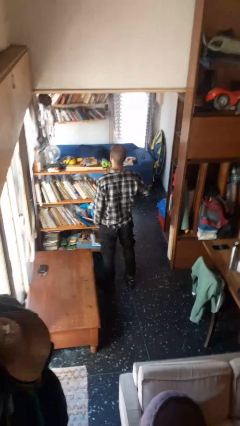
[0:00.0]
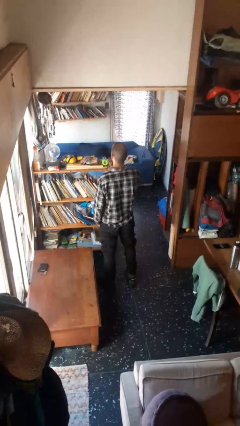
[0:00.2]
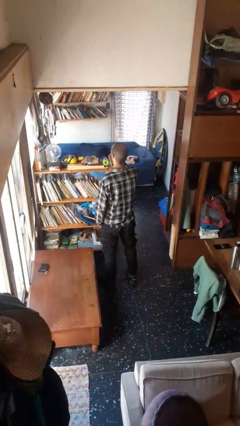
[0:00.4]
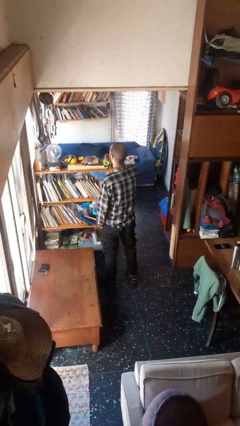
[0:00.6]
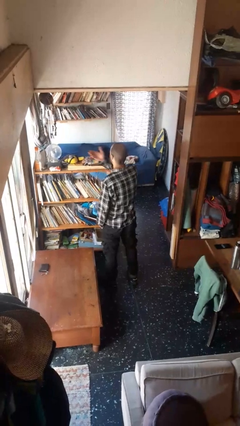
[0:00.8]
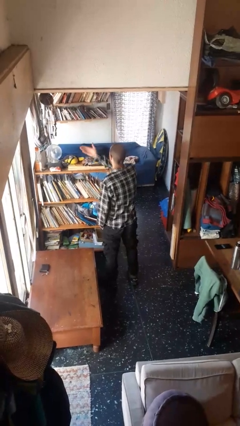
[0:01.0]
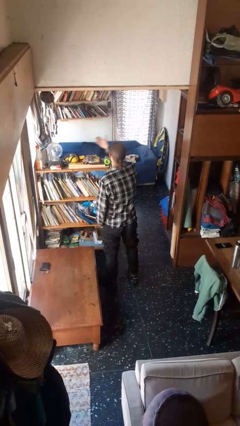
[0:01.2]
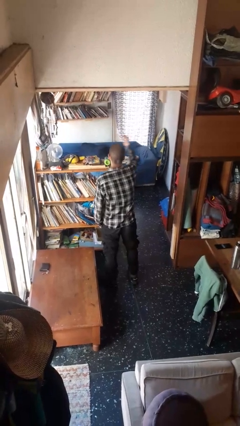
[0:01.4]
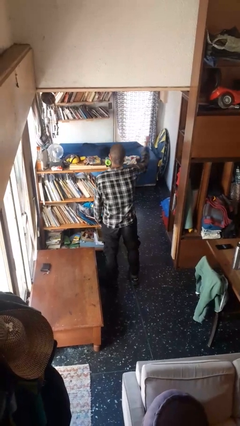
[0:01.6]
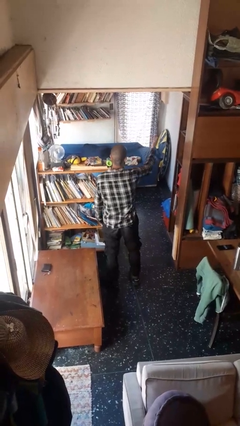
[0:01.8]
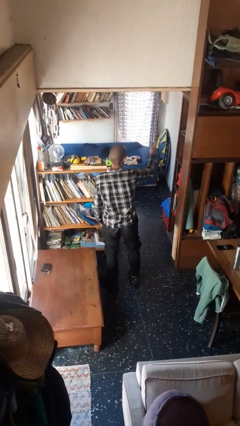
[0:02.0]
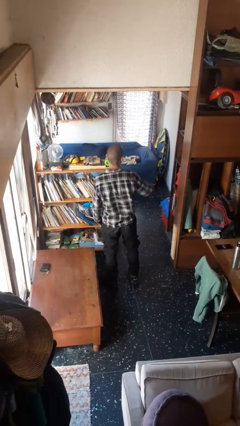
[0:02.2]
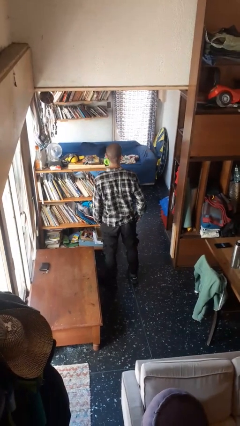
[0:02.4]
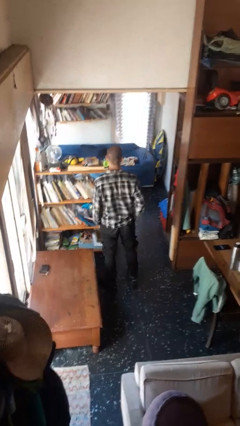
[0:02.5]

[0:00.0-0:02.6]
person gestures blow kiss

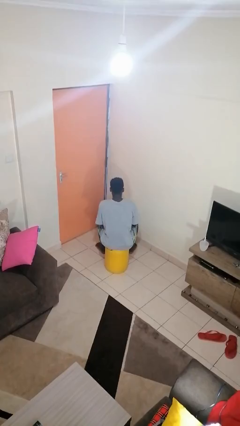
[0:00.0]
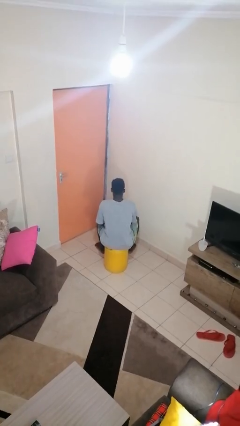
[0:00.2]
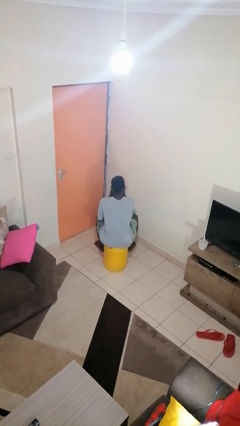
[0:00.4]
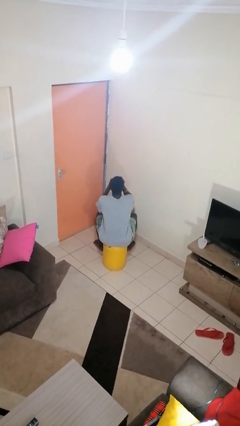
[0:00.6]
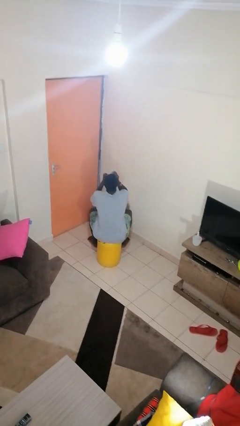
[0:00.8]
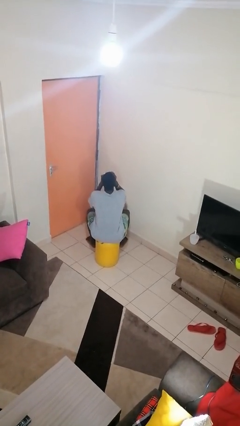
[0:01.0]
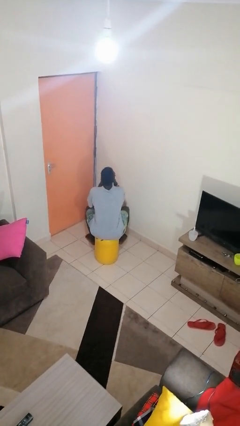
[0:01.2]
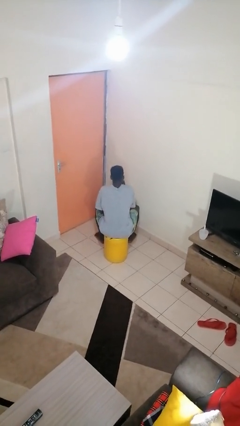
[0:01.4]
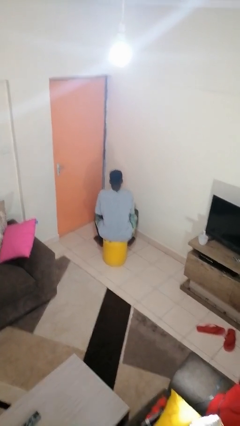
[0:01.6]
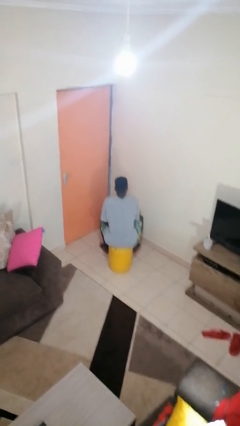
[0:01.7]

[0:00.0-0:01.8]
person drinks from mug

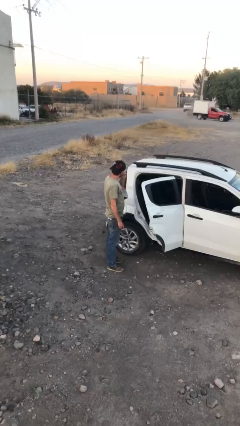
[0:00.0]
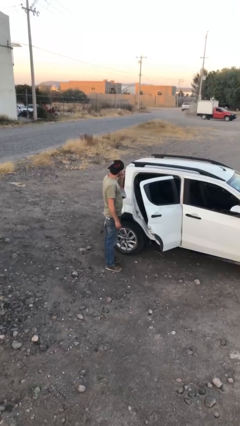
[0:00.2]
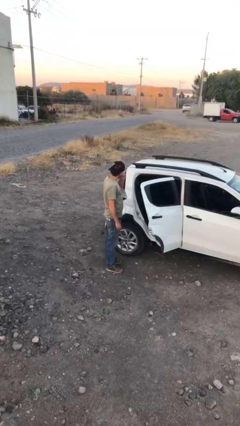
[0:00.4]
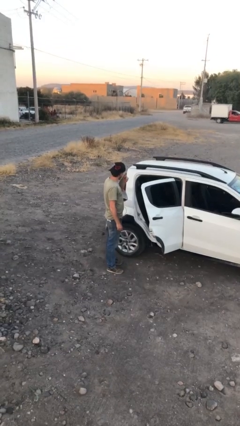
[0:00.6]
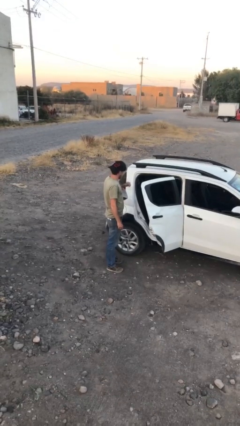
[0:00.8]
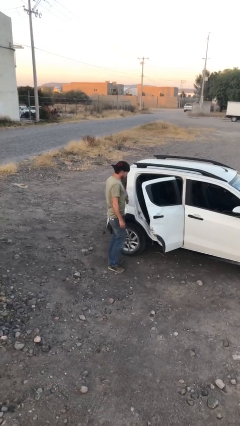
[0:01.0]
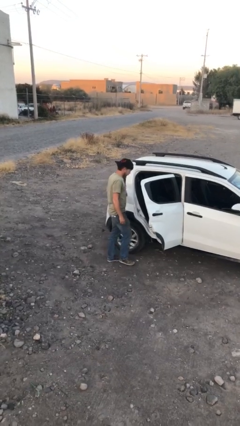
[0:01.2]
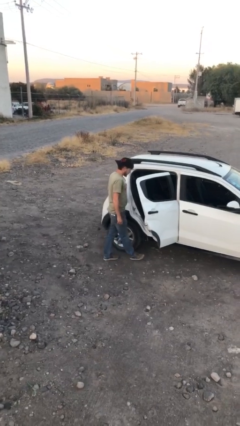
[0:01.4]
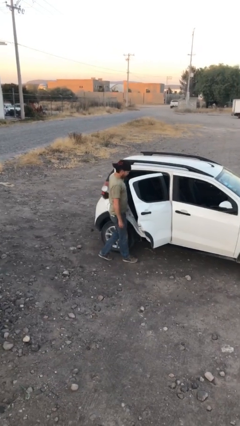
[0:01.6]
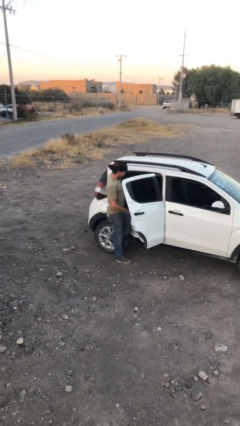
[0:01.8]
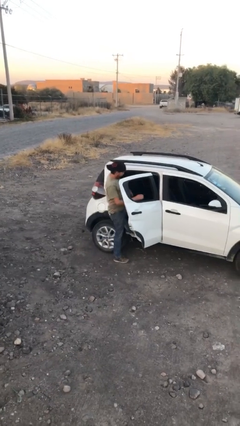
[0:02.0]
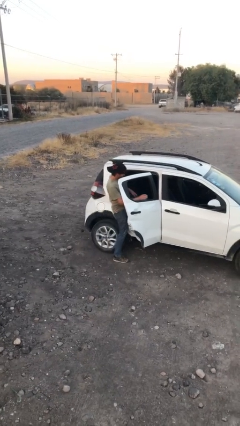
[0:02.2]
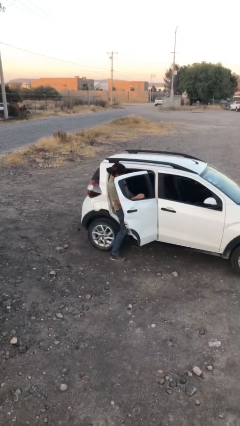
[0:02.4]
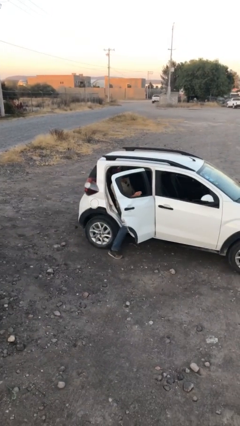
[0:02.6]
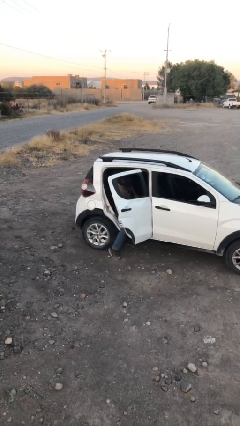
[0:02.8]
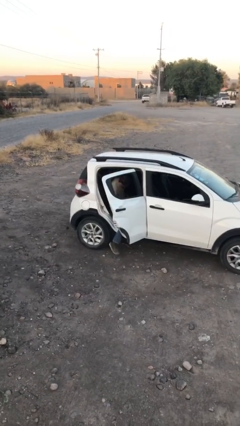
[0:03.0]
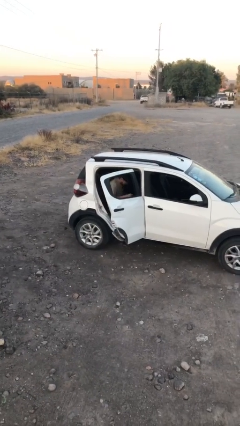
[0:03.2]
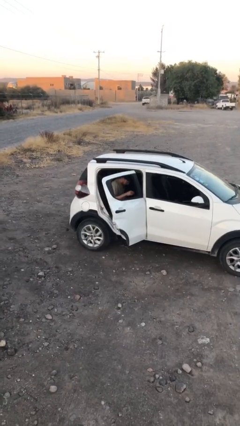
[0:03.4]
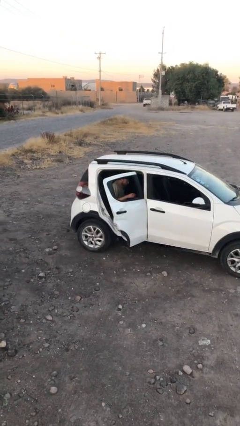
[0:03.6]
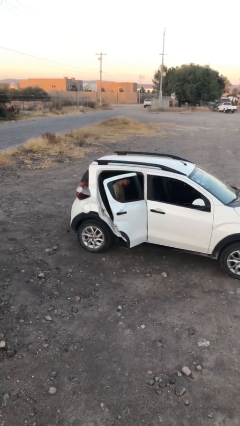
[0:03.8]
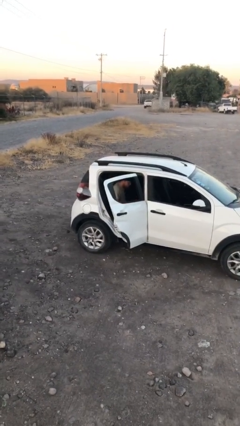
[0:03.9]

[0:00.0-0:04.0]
person enters car

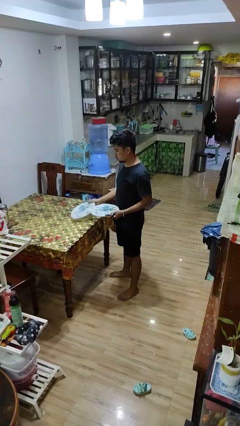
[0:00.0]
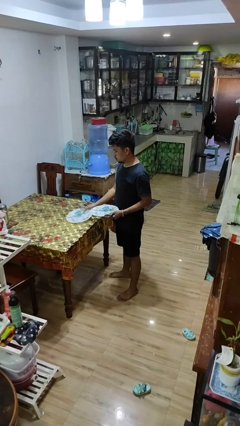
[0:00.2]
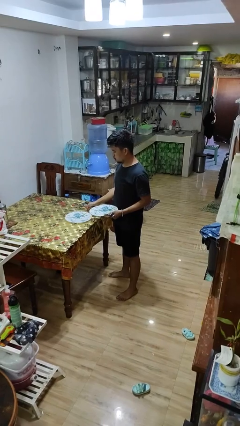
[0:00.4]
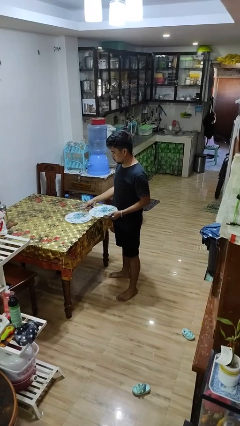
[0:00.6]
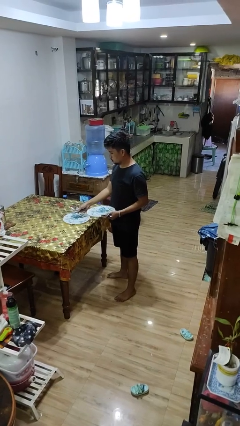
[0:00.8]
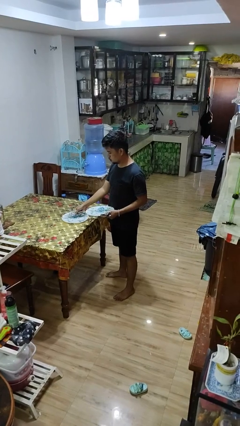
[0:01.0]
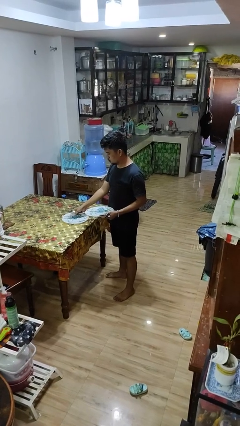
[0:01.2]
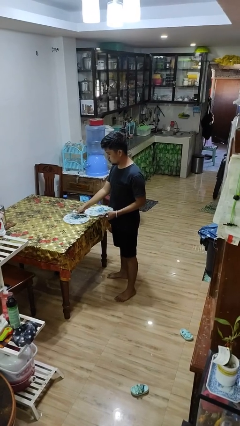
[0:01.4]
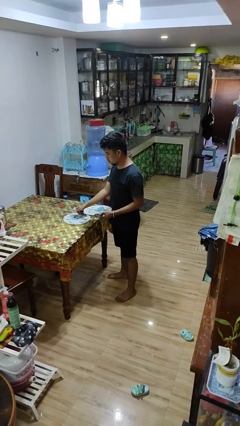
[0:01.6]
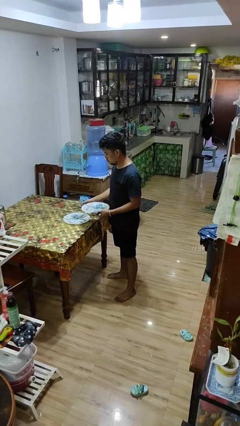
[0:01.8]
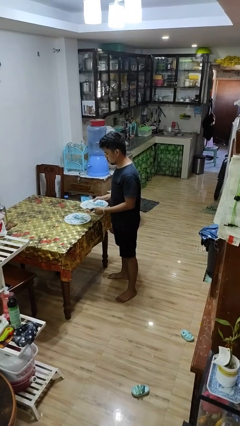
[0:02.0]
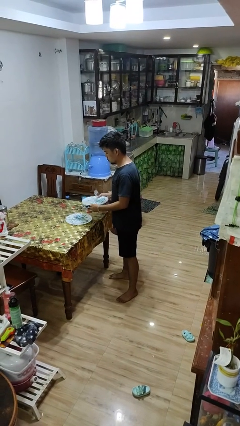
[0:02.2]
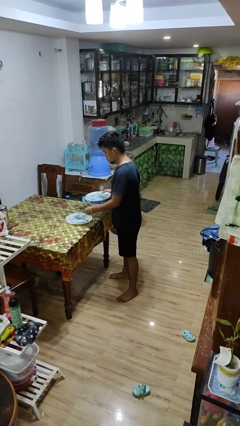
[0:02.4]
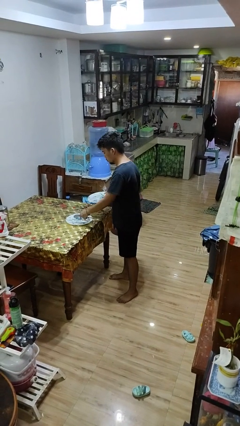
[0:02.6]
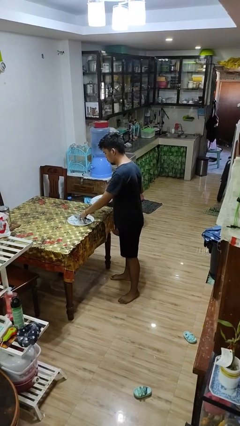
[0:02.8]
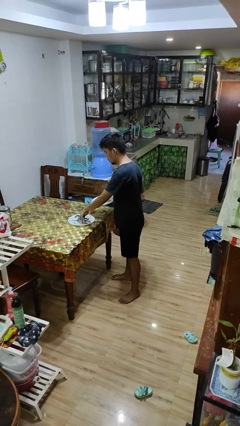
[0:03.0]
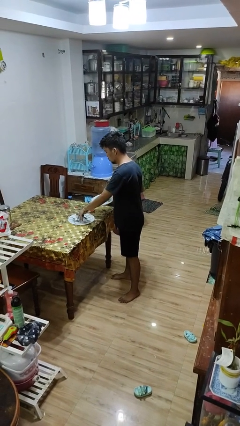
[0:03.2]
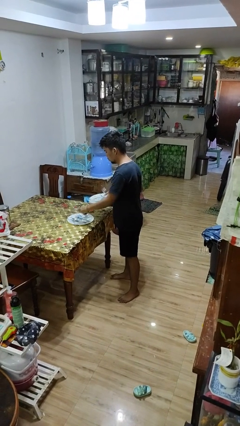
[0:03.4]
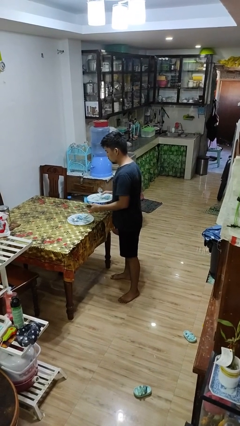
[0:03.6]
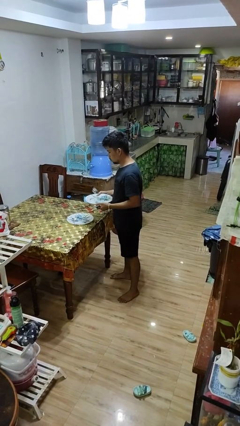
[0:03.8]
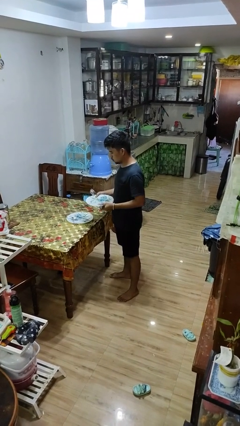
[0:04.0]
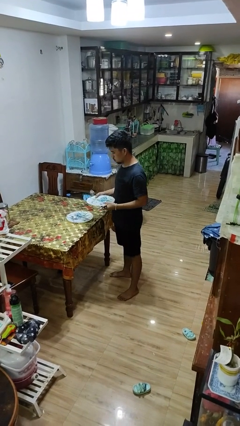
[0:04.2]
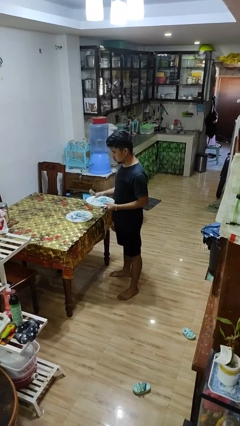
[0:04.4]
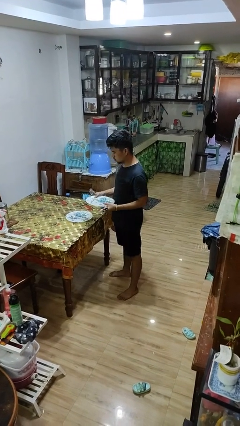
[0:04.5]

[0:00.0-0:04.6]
person sets table

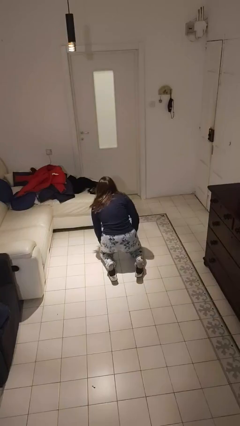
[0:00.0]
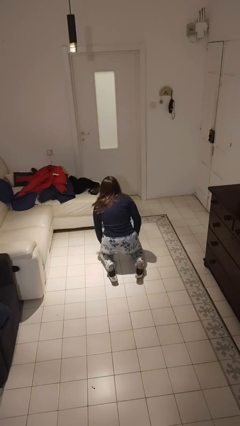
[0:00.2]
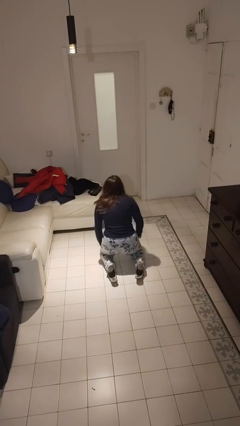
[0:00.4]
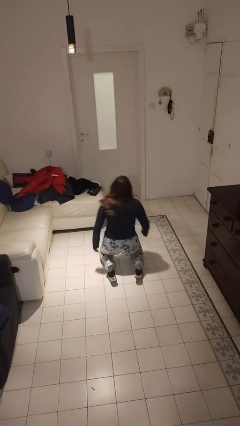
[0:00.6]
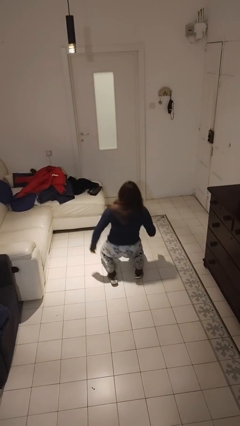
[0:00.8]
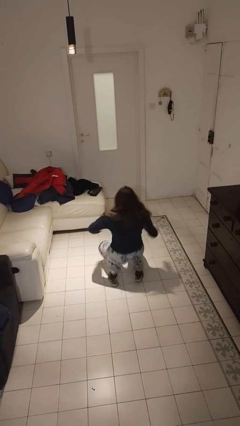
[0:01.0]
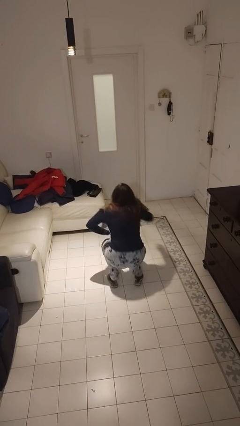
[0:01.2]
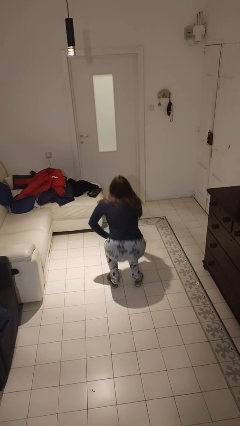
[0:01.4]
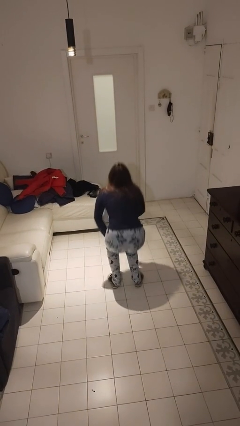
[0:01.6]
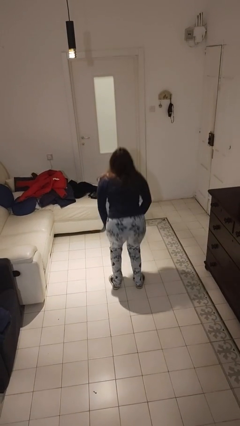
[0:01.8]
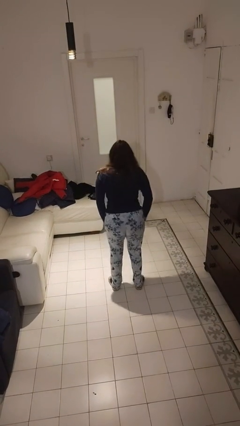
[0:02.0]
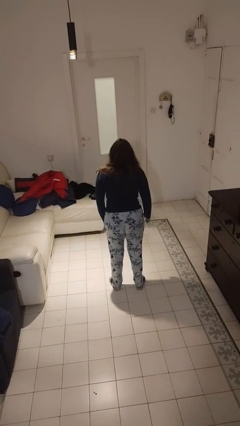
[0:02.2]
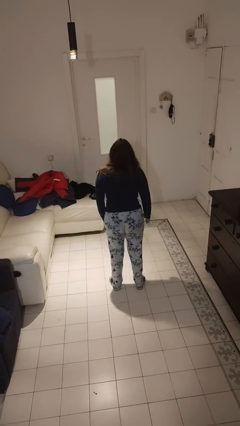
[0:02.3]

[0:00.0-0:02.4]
person stands up from floor

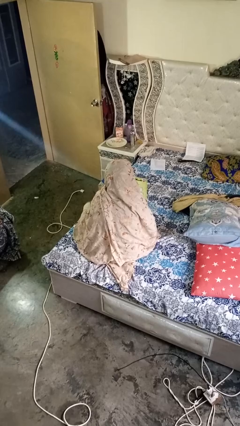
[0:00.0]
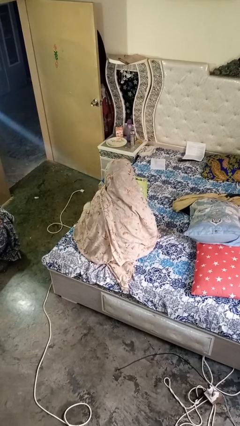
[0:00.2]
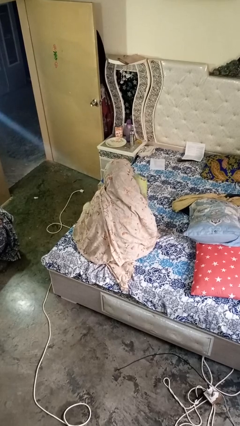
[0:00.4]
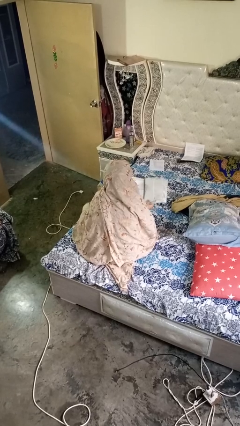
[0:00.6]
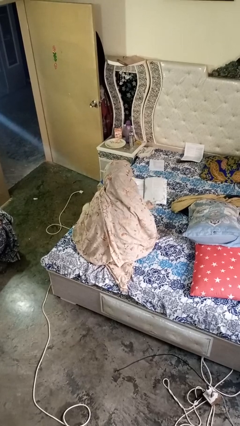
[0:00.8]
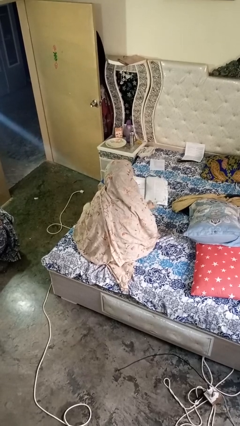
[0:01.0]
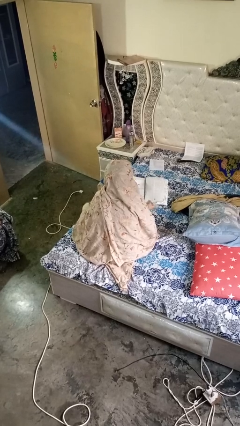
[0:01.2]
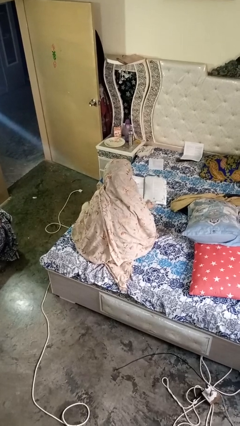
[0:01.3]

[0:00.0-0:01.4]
person reads magazine
